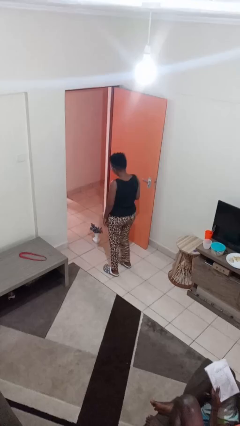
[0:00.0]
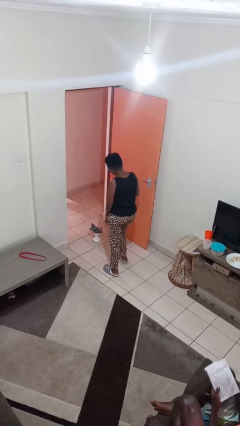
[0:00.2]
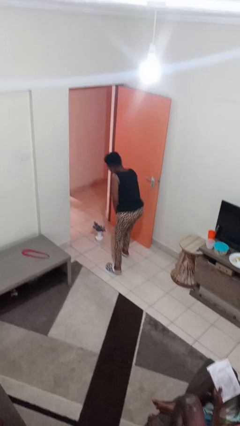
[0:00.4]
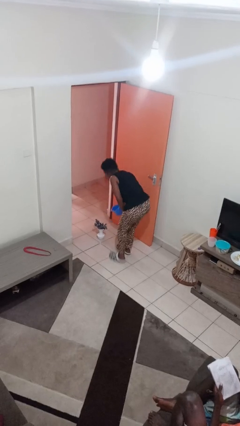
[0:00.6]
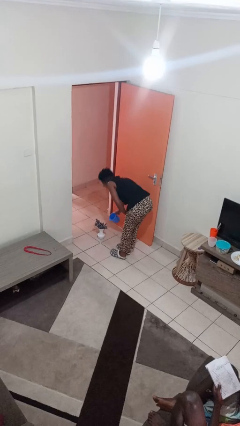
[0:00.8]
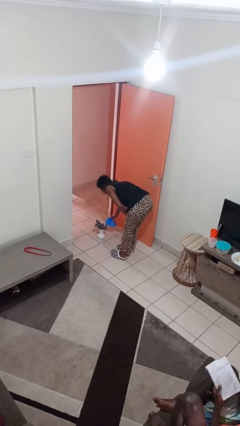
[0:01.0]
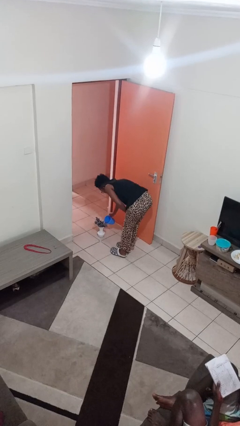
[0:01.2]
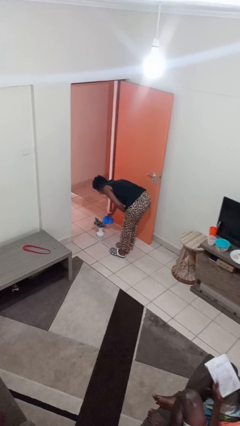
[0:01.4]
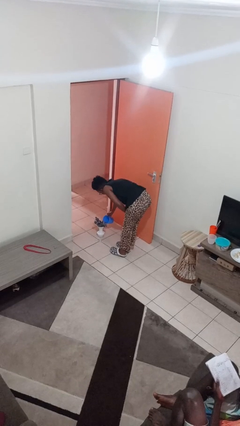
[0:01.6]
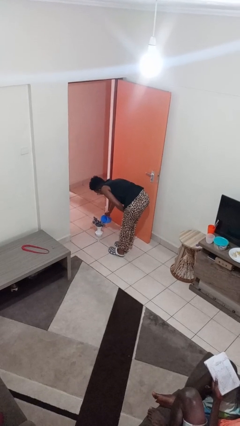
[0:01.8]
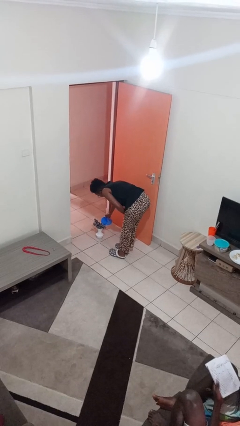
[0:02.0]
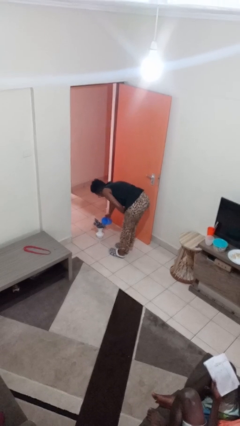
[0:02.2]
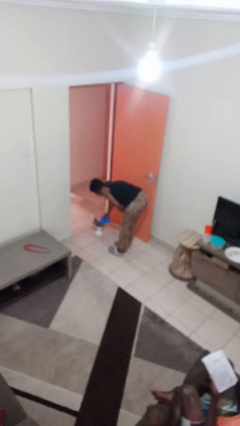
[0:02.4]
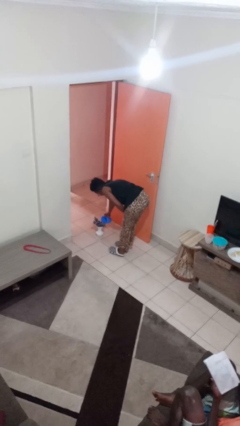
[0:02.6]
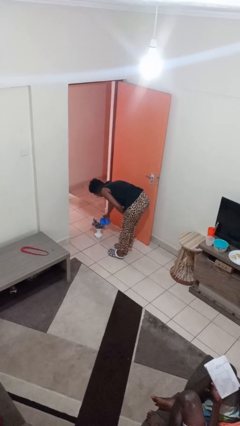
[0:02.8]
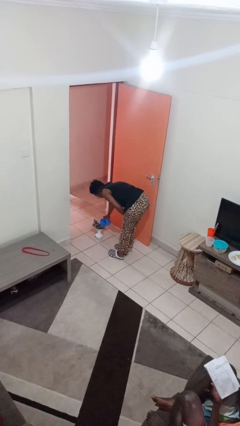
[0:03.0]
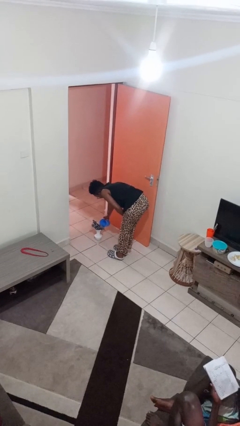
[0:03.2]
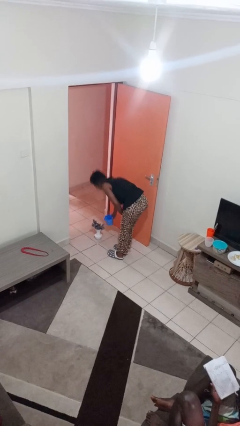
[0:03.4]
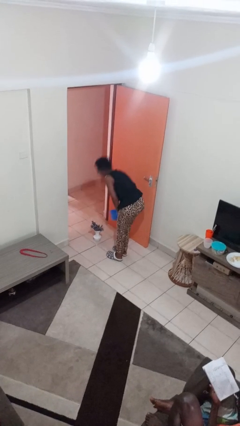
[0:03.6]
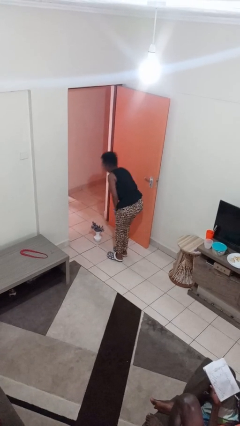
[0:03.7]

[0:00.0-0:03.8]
person waters houseplant

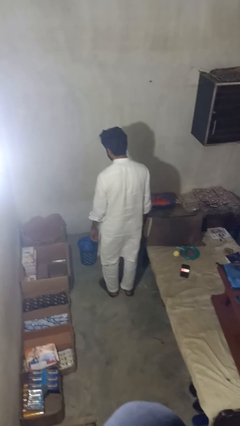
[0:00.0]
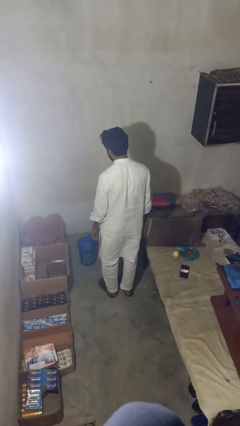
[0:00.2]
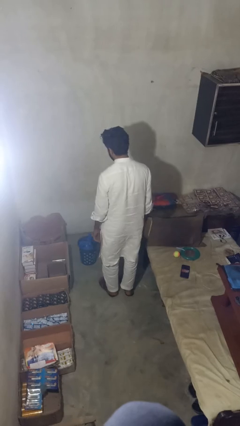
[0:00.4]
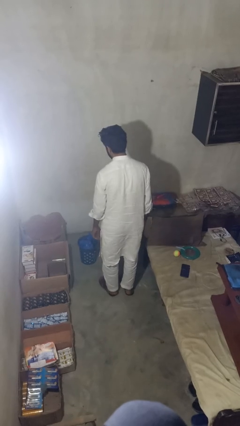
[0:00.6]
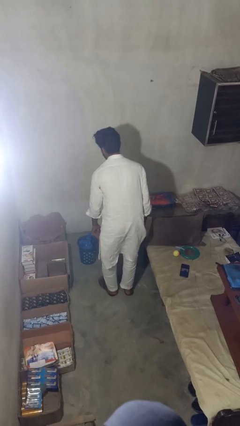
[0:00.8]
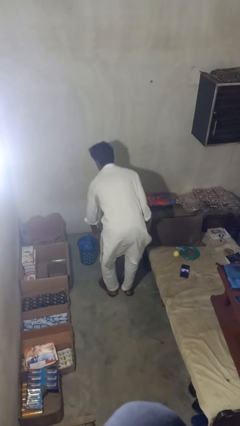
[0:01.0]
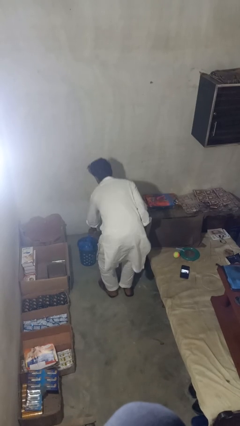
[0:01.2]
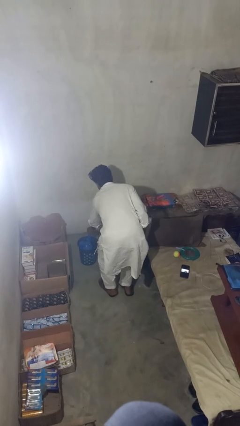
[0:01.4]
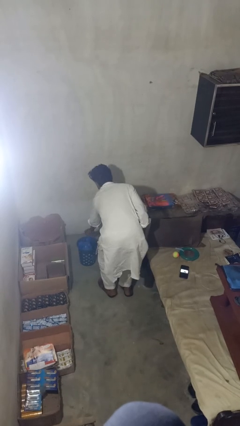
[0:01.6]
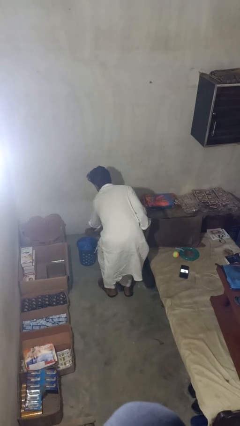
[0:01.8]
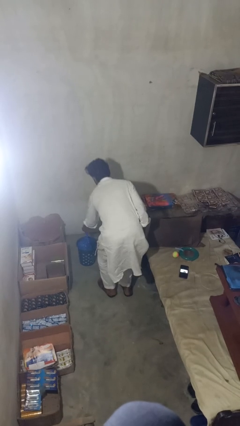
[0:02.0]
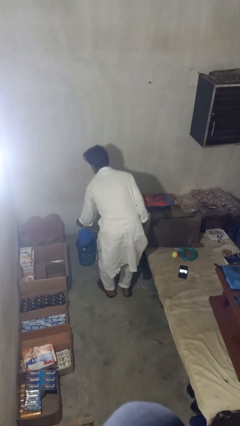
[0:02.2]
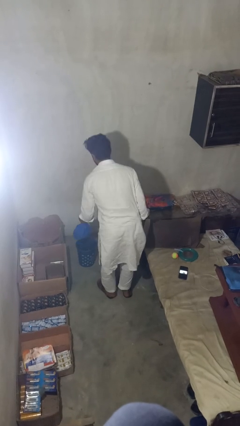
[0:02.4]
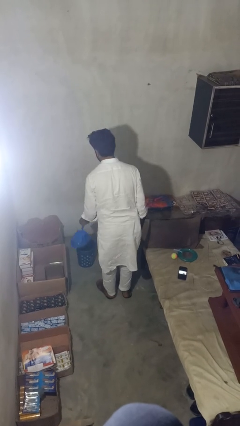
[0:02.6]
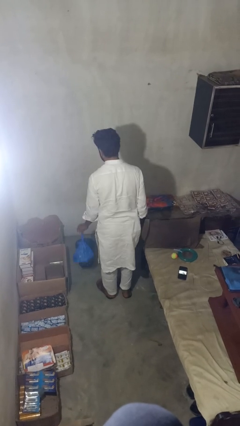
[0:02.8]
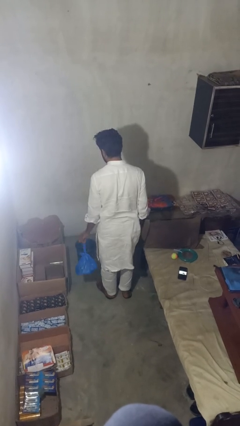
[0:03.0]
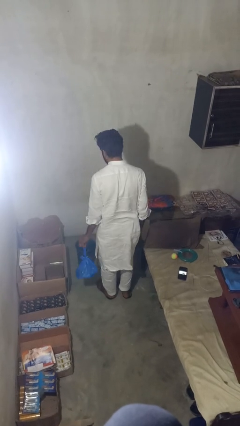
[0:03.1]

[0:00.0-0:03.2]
person takes object from basket

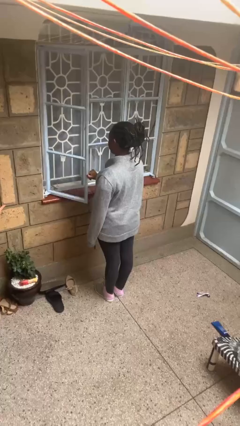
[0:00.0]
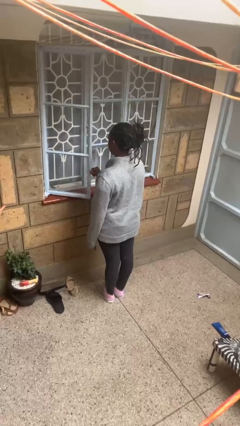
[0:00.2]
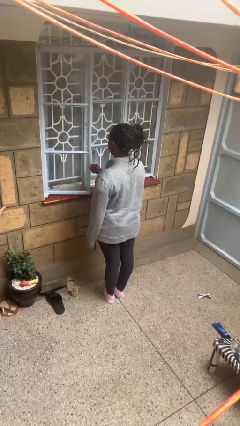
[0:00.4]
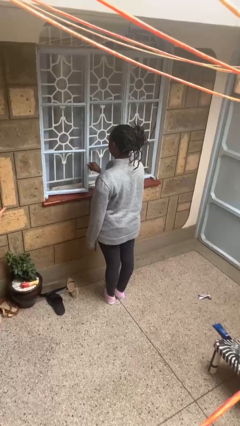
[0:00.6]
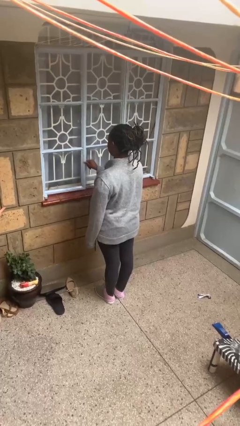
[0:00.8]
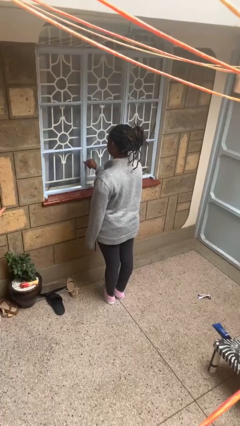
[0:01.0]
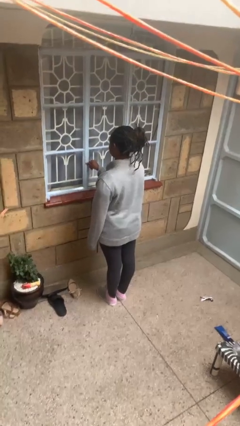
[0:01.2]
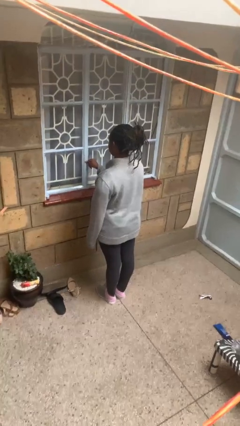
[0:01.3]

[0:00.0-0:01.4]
person closes home window

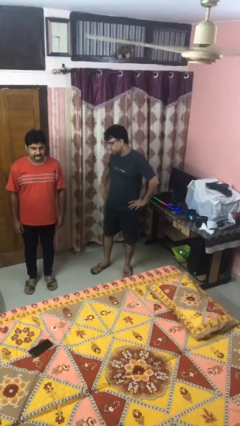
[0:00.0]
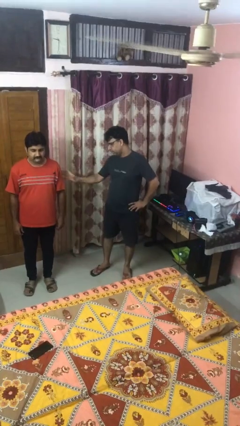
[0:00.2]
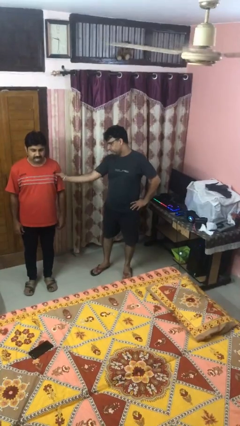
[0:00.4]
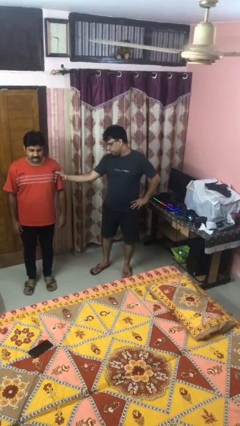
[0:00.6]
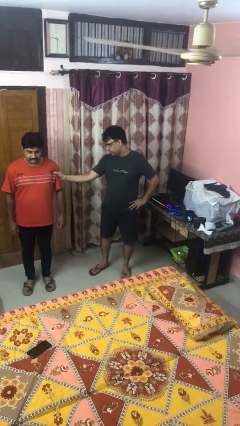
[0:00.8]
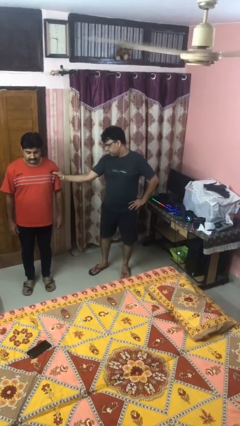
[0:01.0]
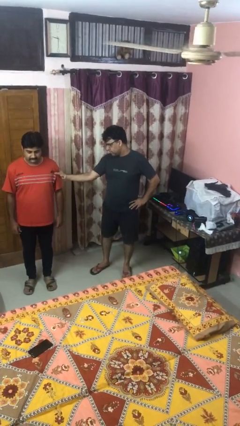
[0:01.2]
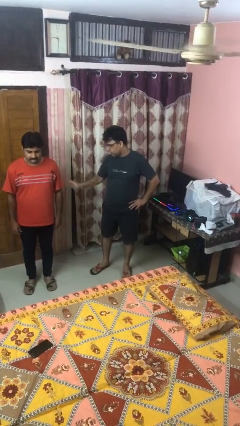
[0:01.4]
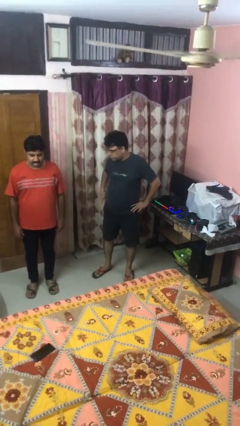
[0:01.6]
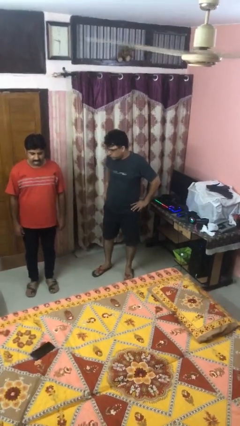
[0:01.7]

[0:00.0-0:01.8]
person grabs person by bicep

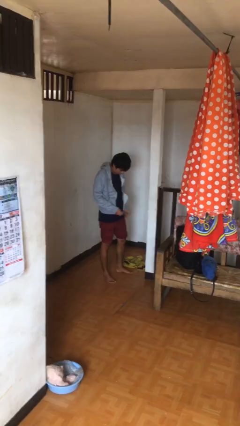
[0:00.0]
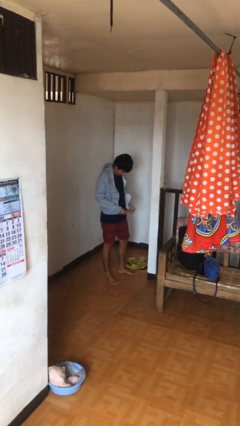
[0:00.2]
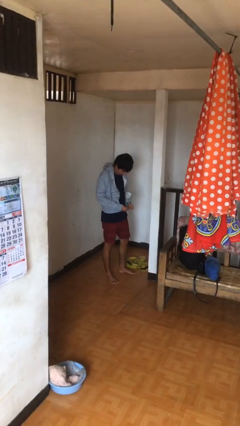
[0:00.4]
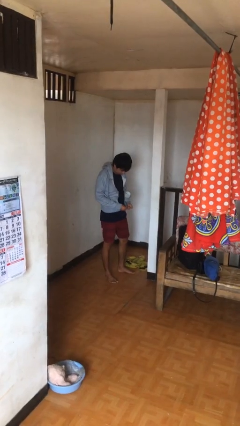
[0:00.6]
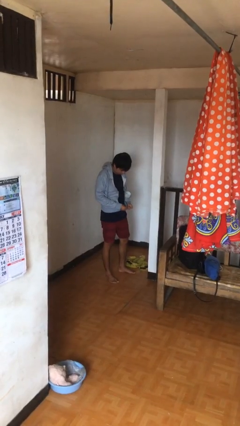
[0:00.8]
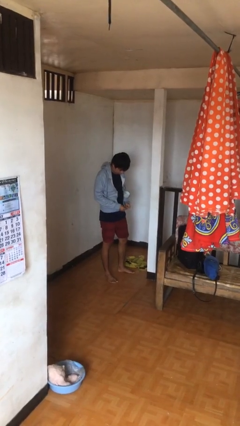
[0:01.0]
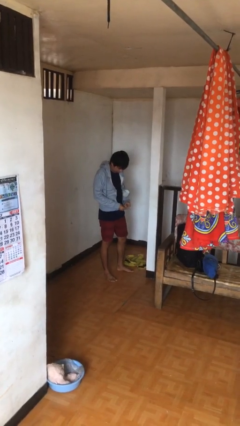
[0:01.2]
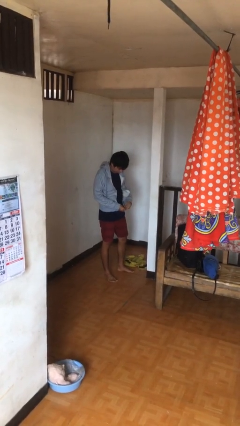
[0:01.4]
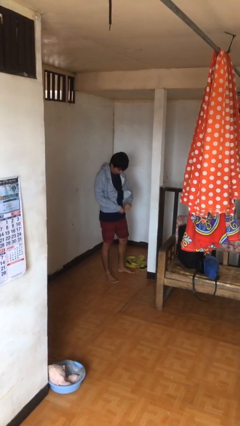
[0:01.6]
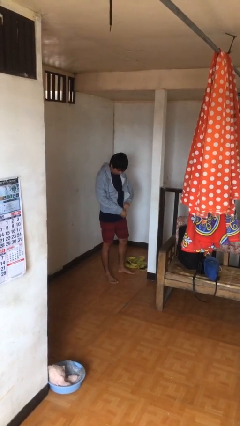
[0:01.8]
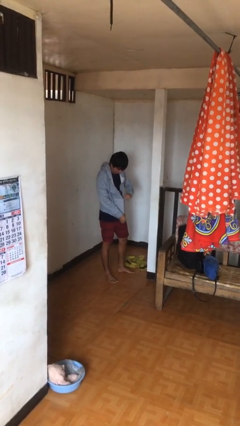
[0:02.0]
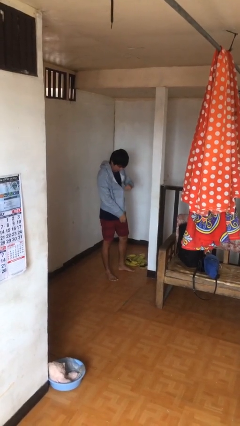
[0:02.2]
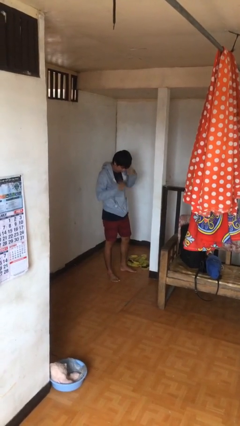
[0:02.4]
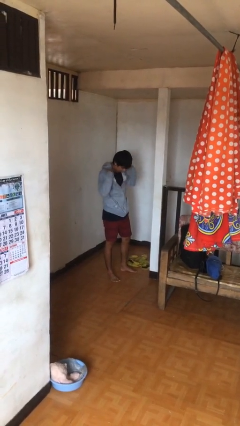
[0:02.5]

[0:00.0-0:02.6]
person zips up jacket

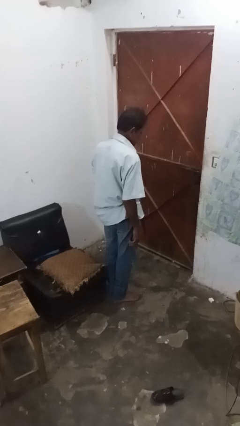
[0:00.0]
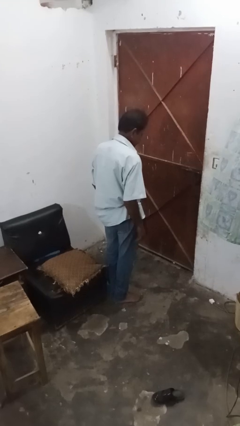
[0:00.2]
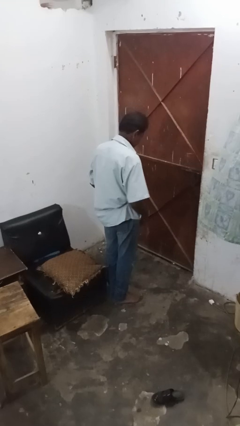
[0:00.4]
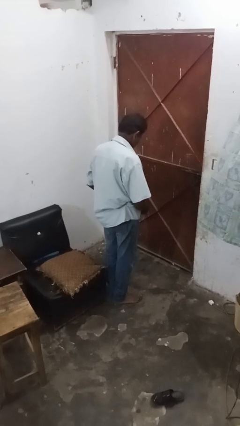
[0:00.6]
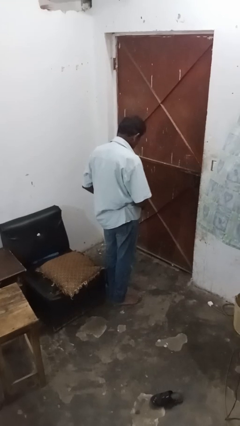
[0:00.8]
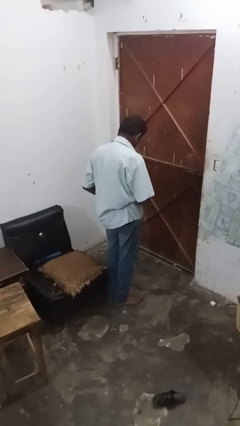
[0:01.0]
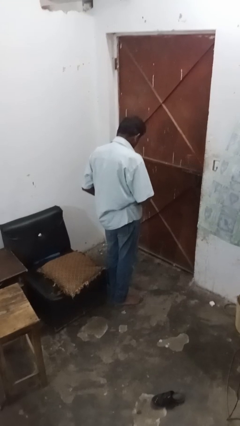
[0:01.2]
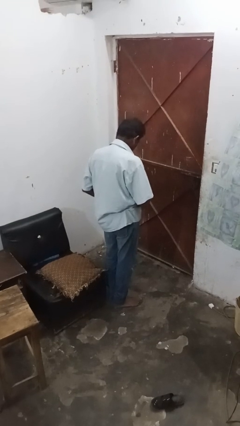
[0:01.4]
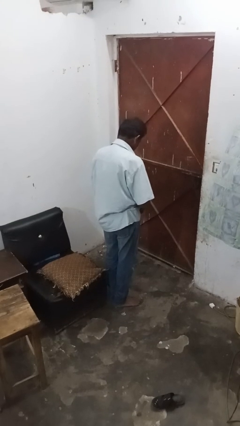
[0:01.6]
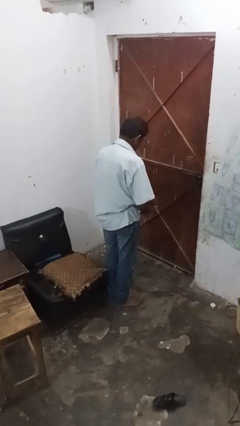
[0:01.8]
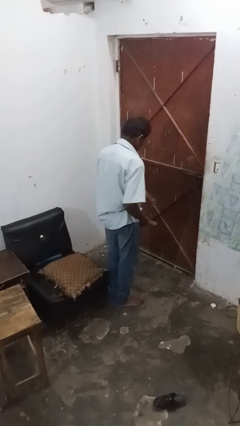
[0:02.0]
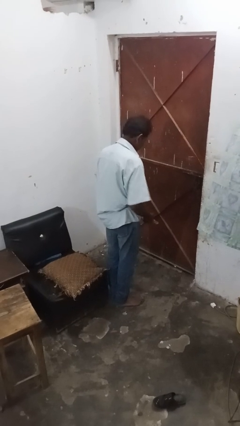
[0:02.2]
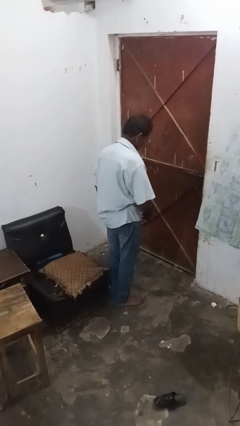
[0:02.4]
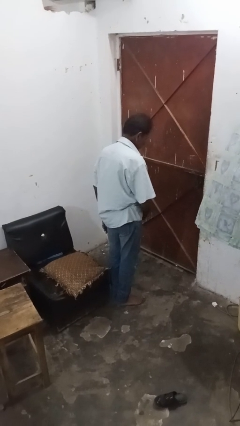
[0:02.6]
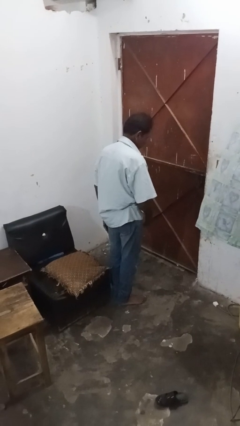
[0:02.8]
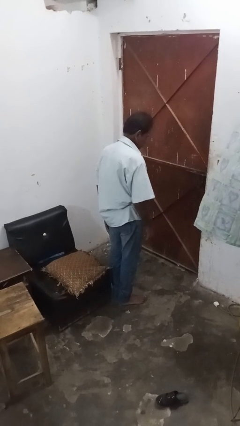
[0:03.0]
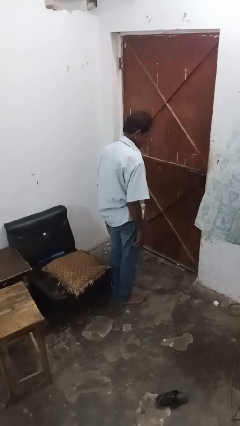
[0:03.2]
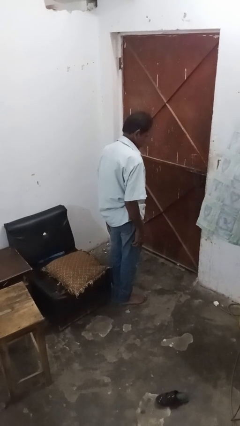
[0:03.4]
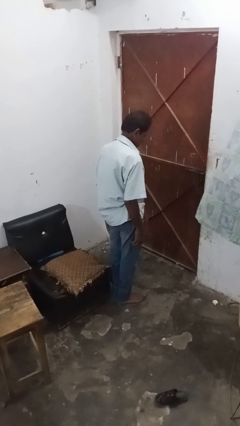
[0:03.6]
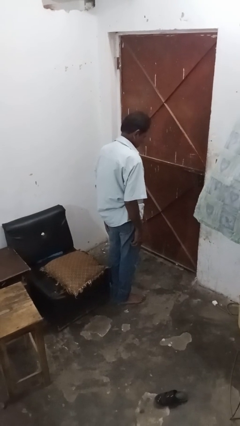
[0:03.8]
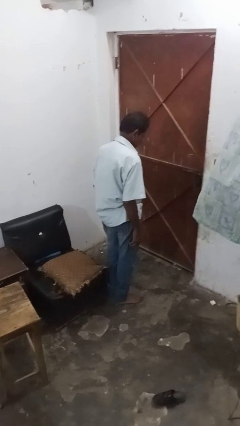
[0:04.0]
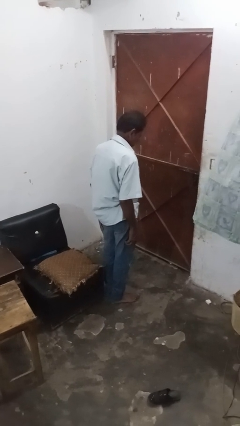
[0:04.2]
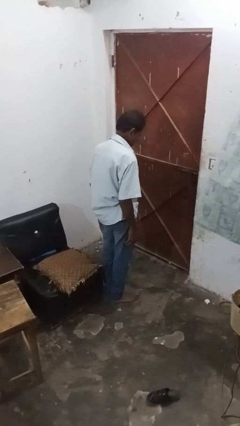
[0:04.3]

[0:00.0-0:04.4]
person puts on belt

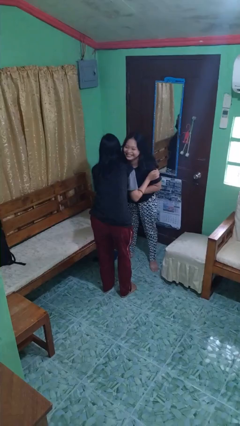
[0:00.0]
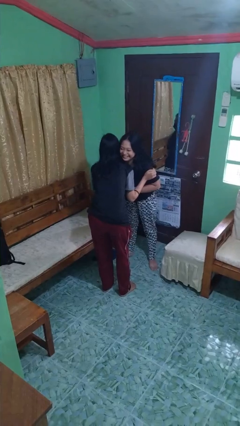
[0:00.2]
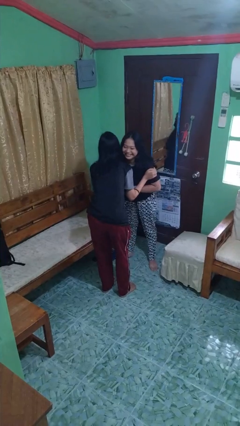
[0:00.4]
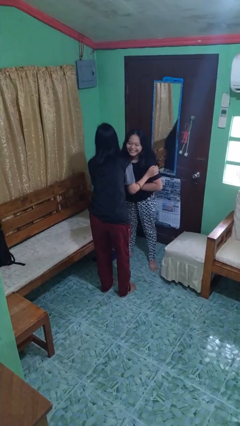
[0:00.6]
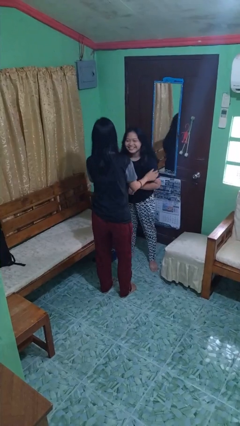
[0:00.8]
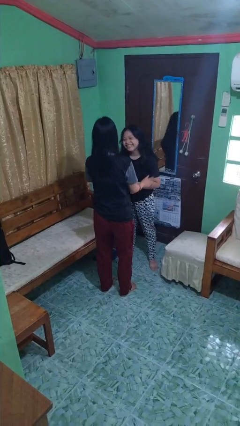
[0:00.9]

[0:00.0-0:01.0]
person kisses cheek of person
